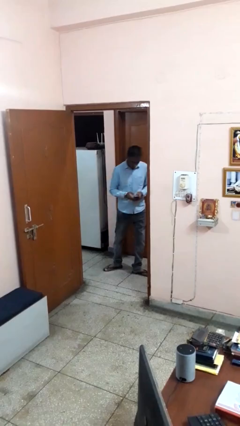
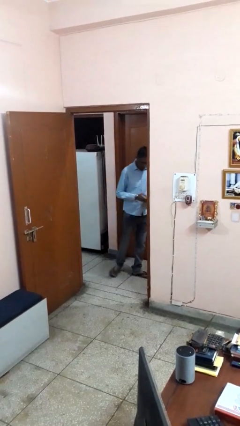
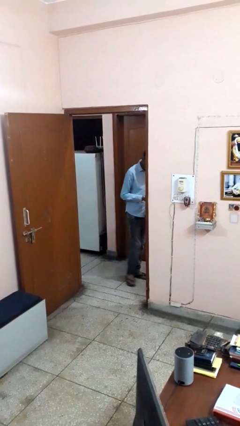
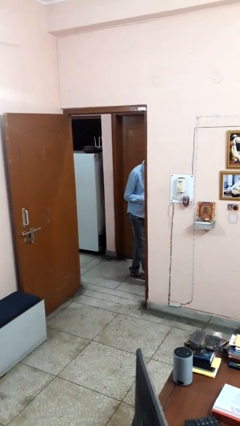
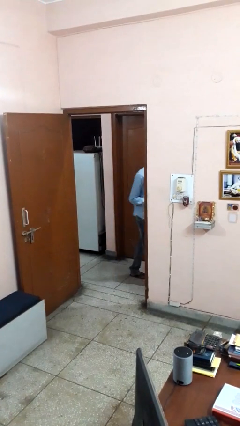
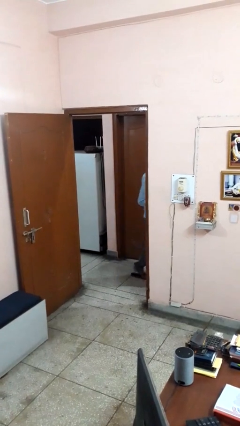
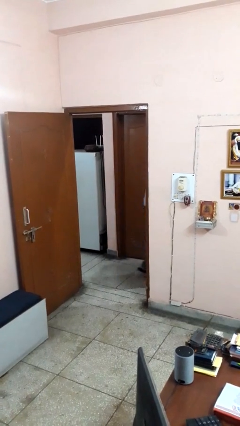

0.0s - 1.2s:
person exits scene through structure

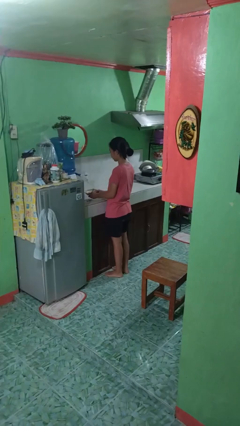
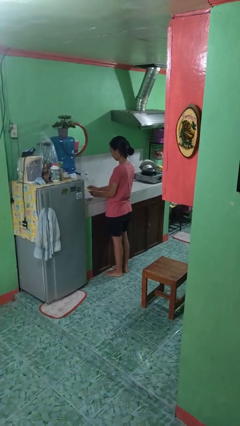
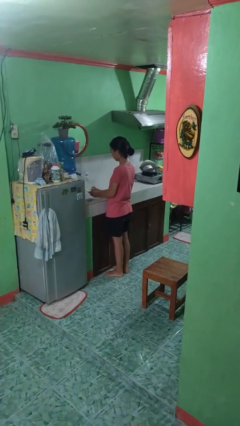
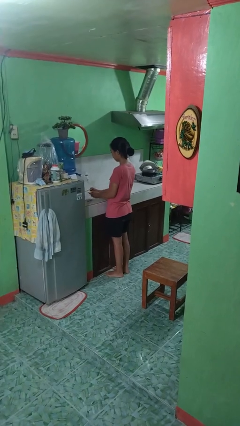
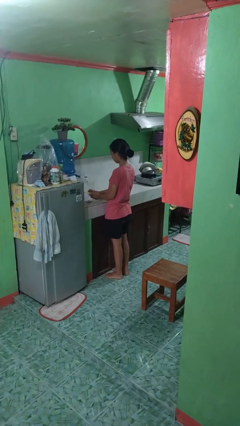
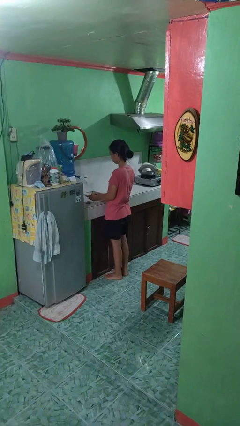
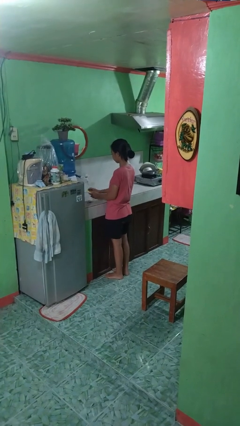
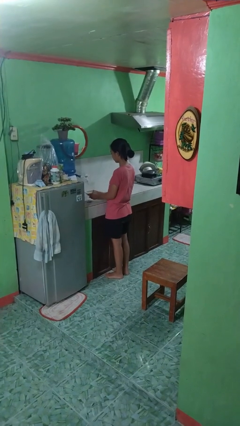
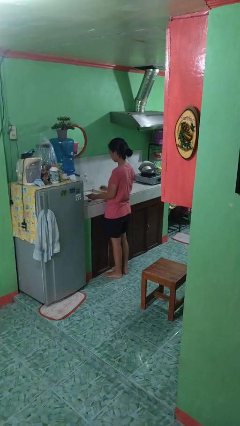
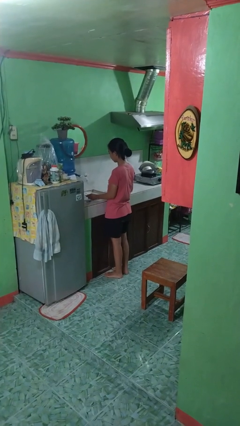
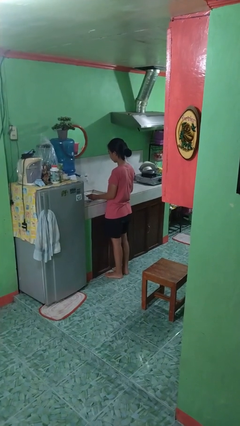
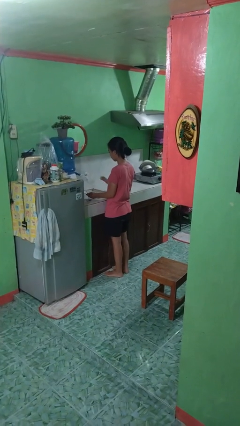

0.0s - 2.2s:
person washes dish

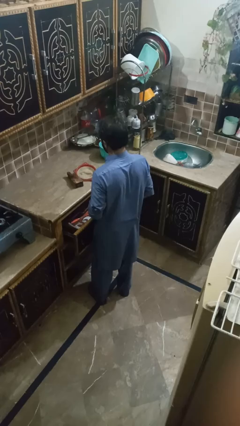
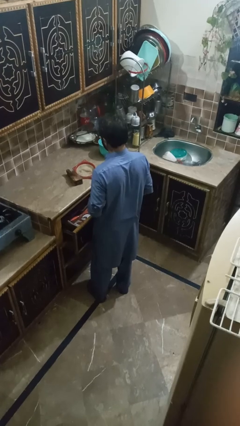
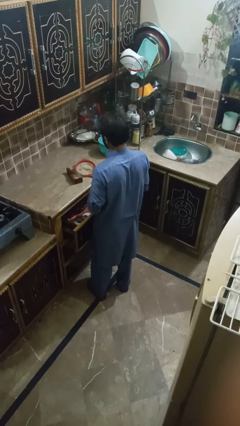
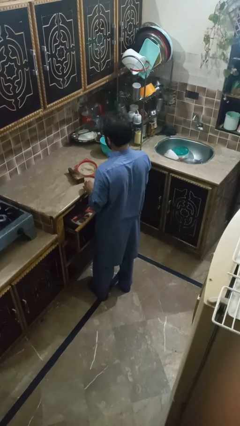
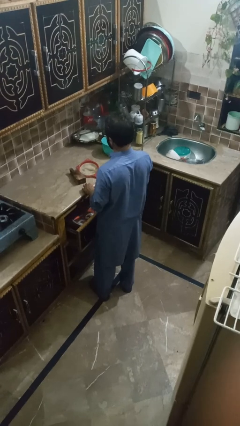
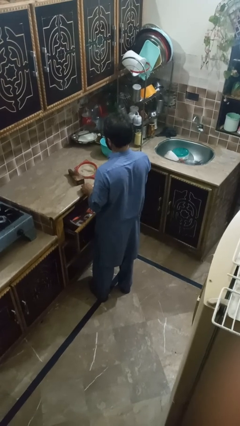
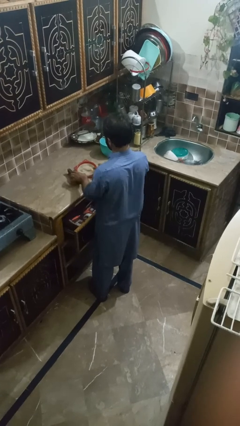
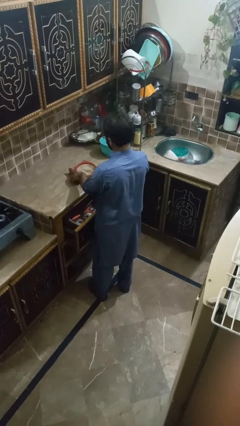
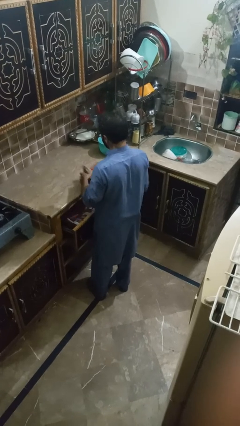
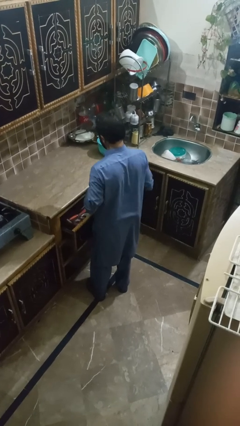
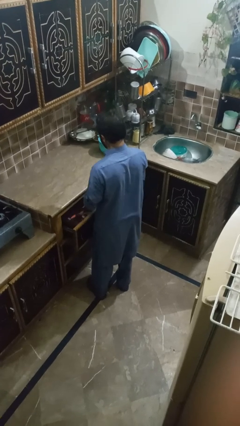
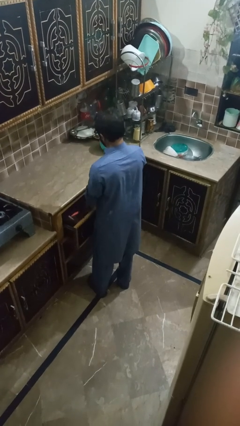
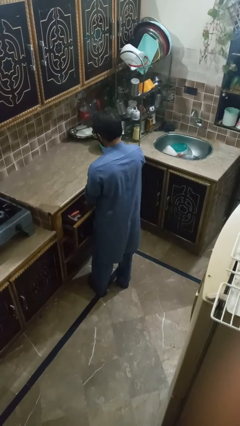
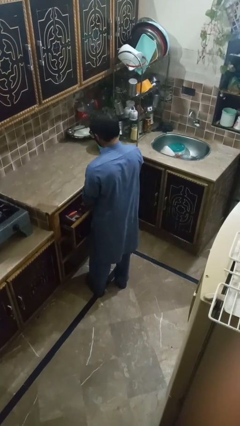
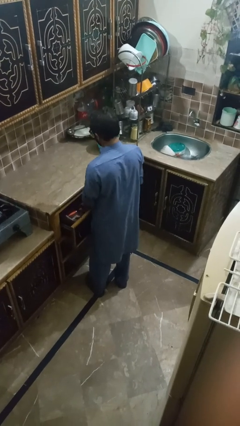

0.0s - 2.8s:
person puts object into kitchen drawer

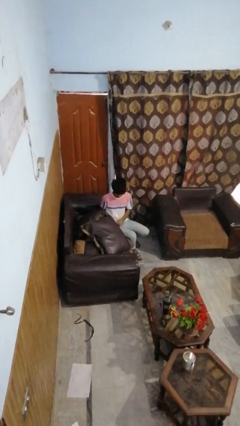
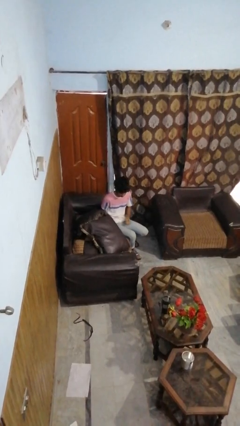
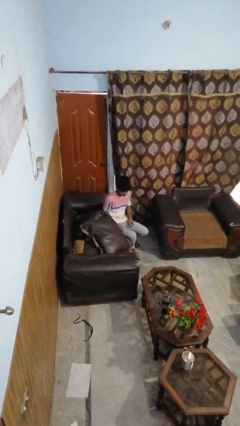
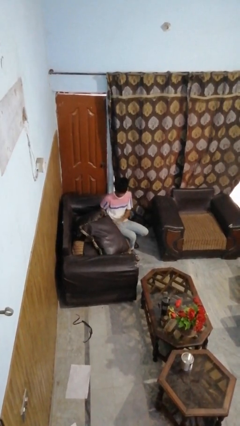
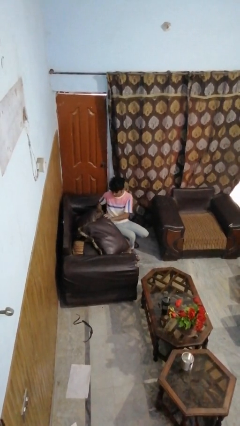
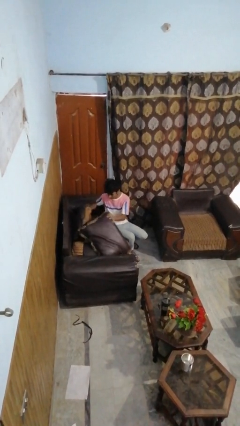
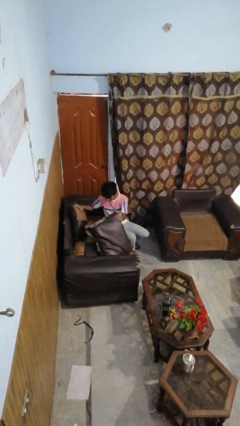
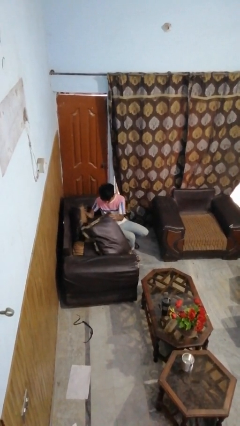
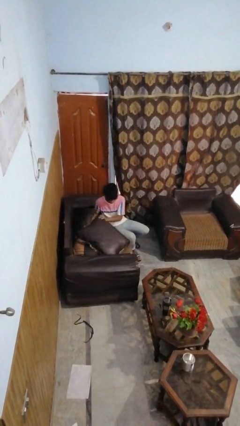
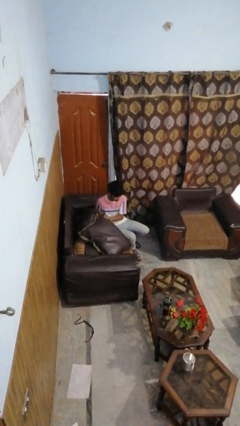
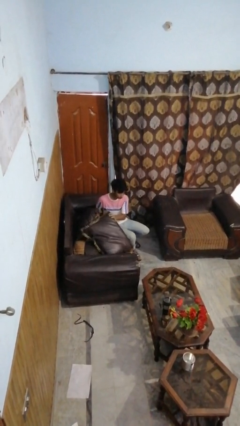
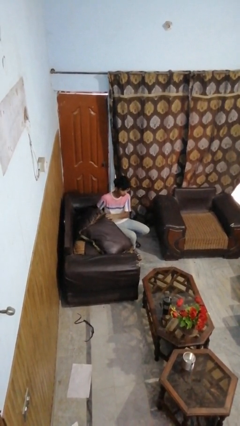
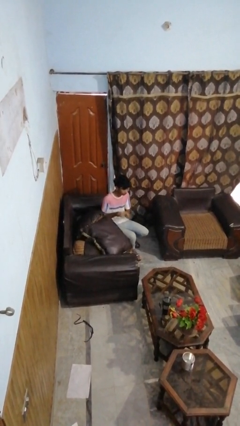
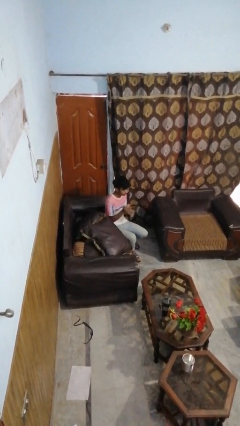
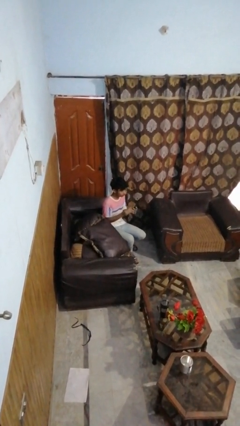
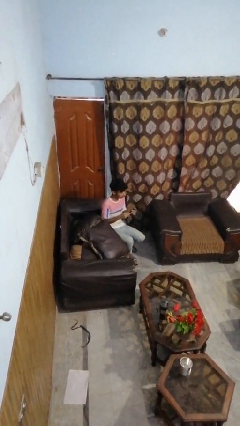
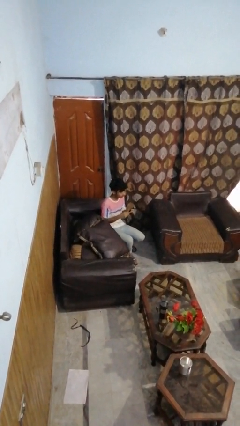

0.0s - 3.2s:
person searches in couch

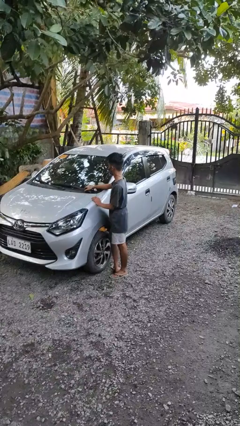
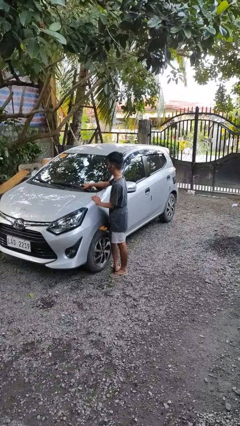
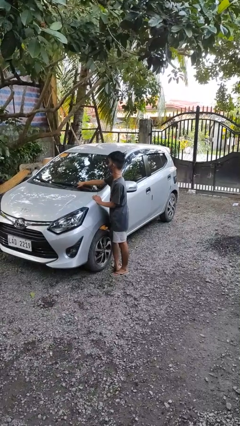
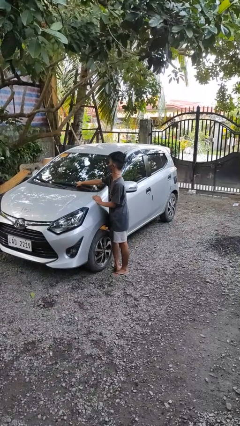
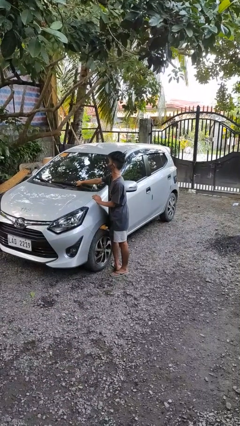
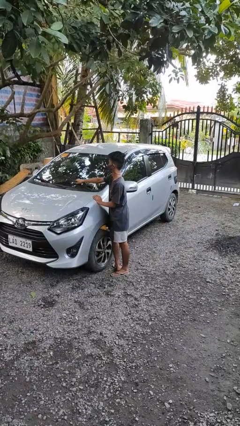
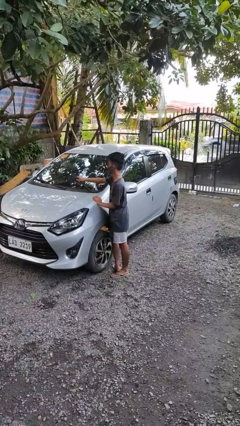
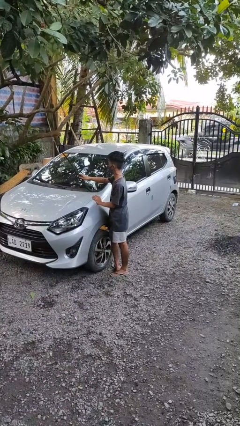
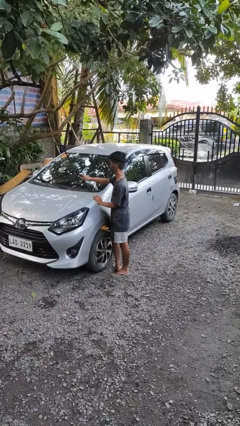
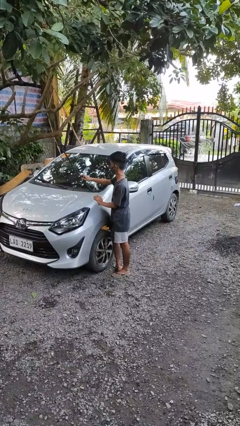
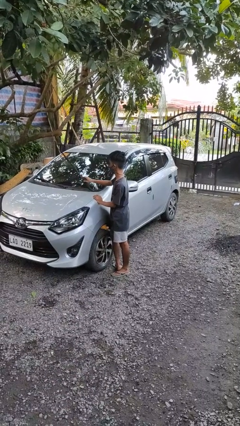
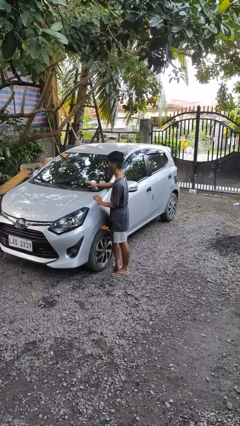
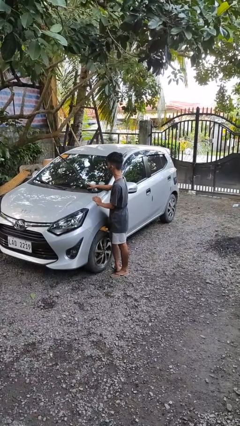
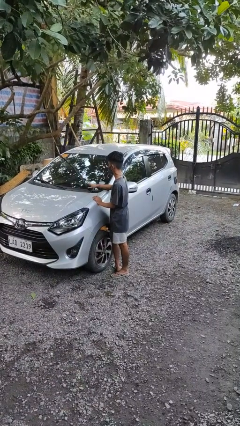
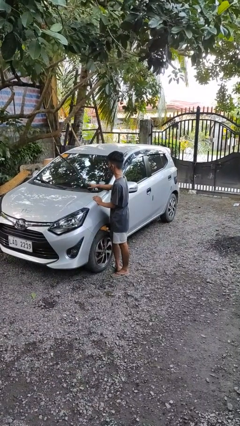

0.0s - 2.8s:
person flips up car wipers

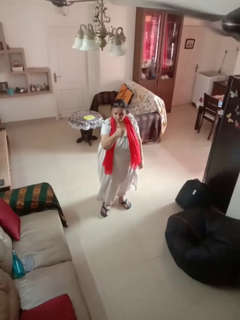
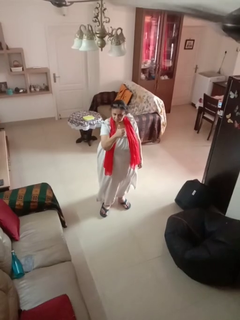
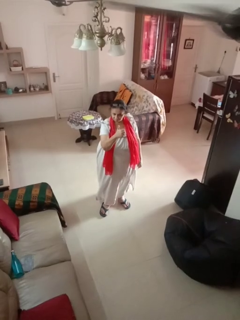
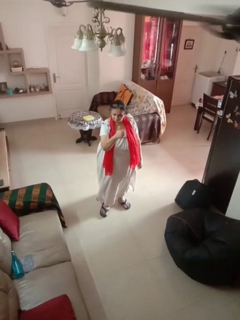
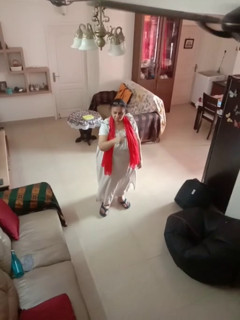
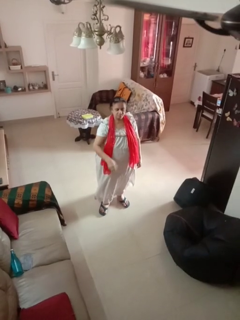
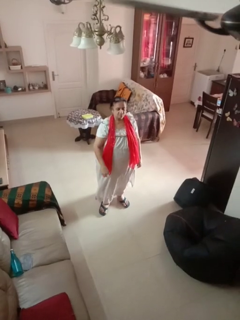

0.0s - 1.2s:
person gestures thumbs up

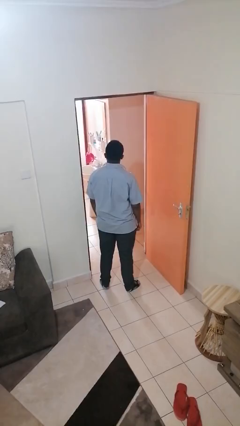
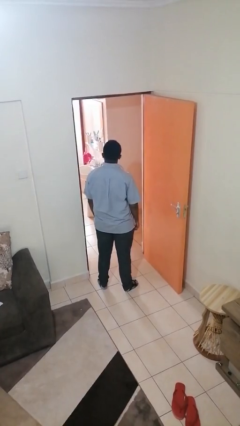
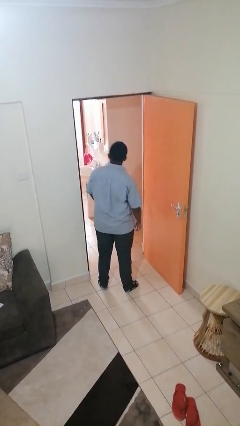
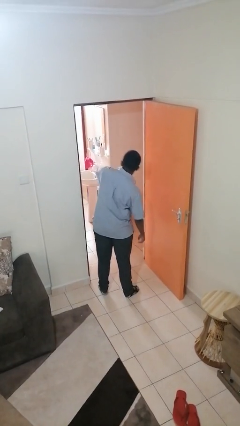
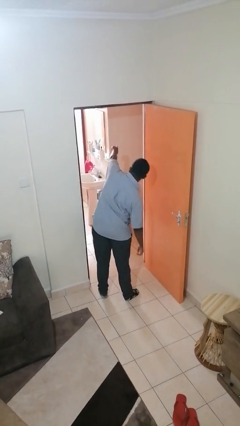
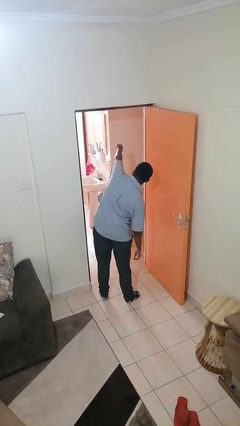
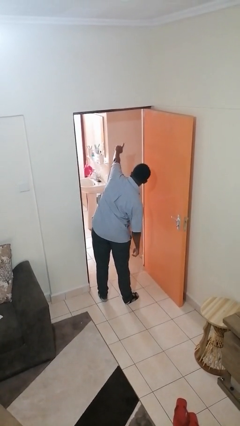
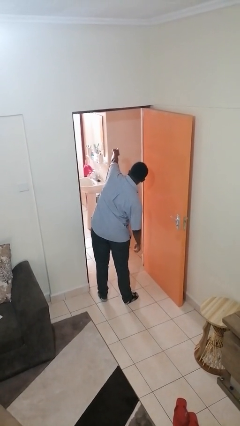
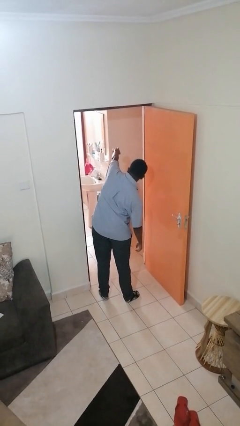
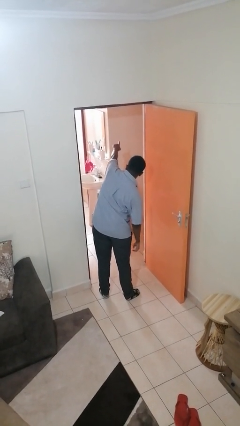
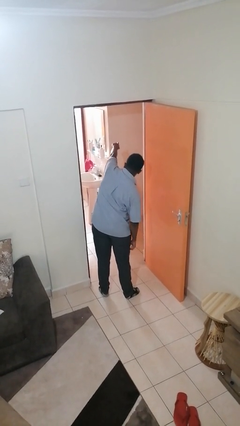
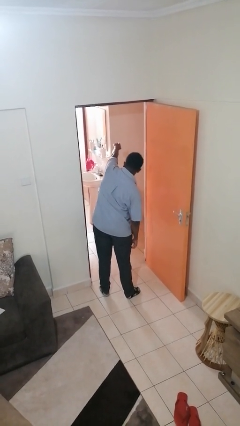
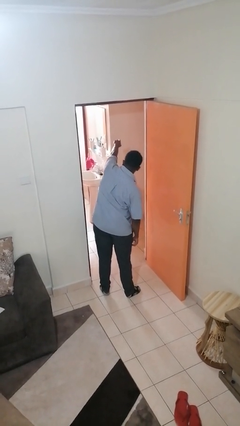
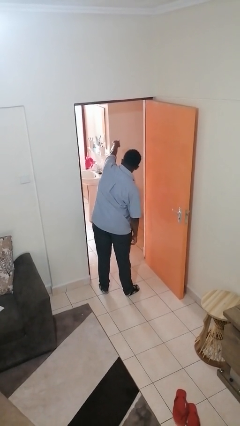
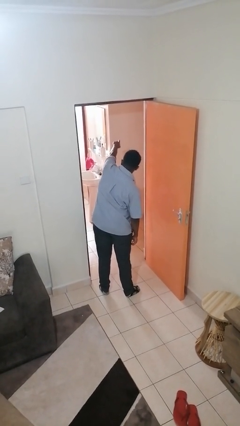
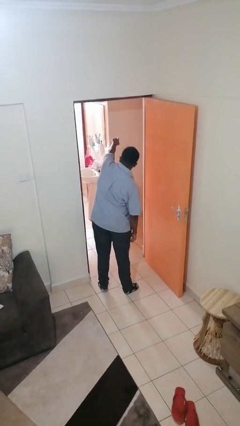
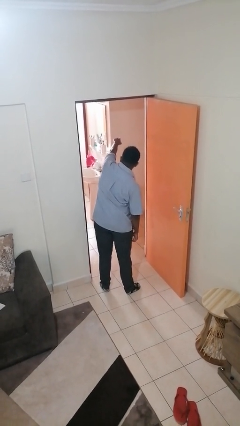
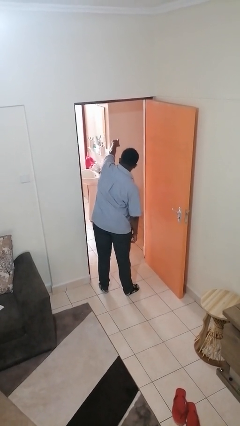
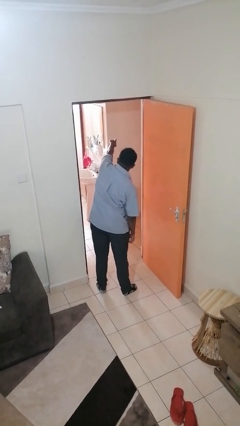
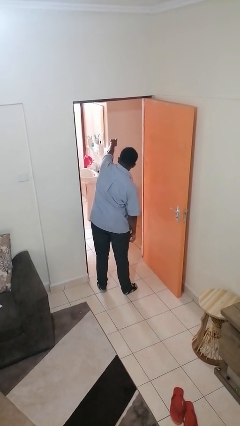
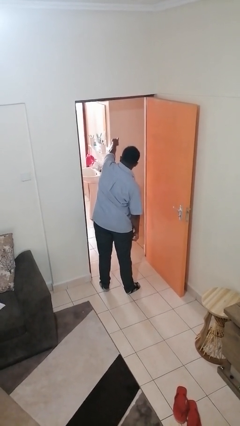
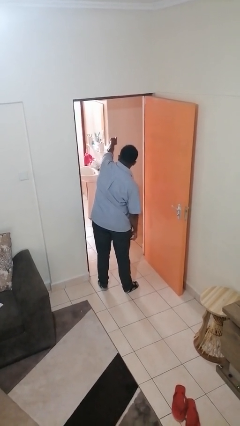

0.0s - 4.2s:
person points at person
